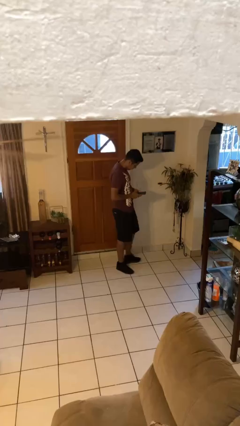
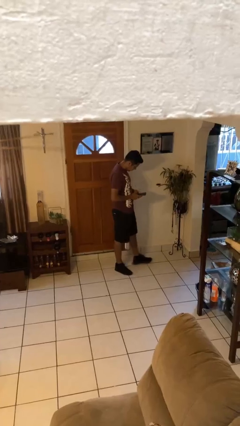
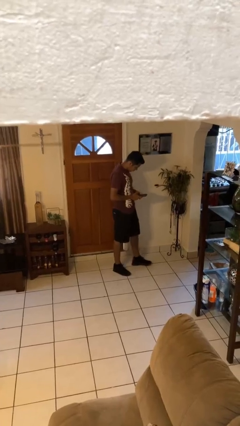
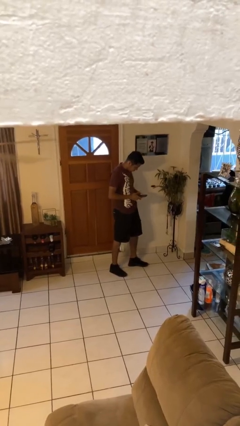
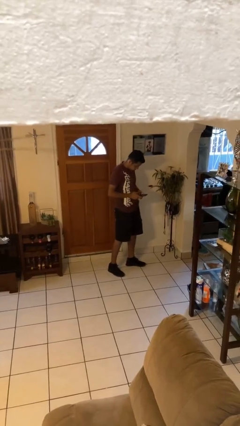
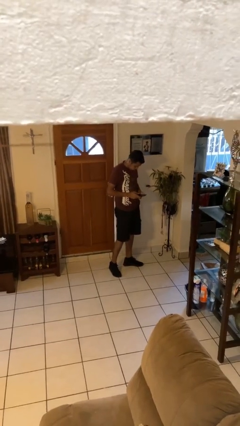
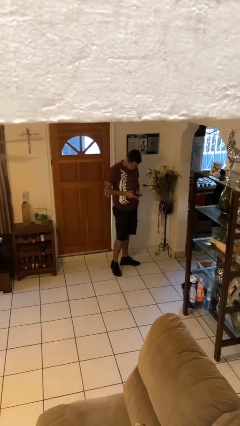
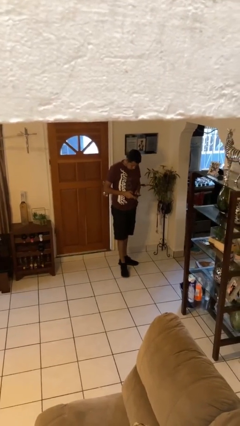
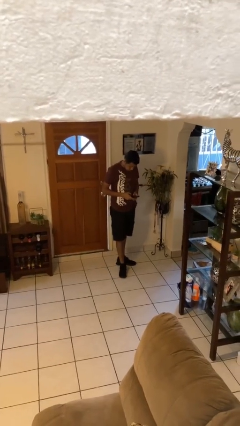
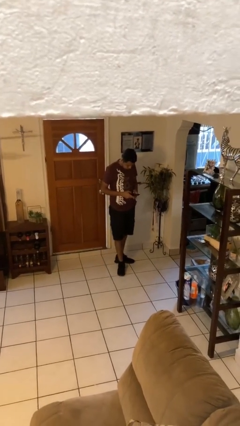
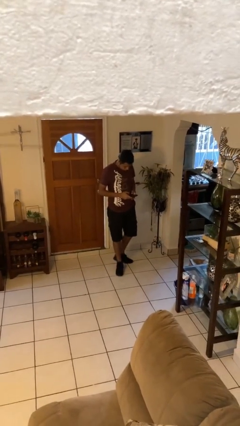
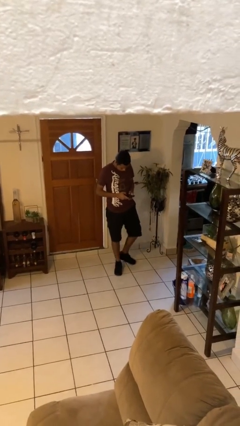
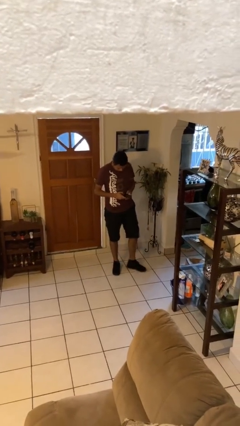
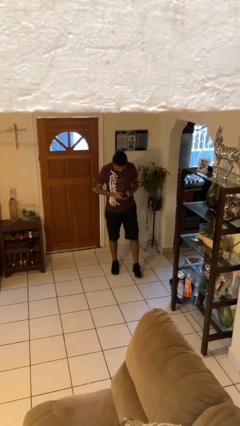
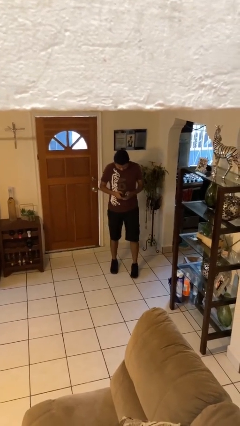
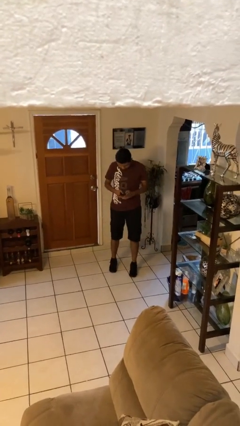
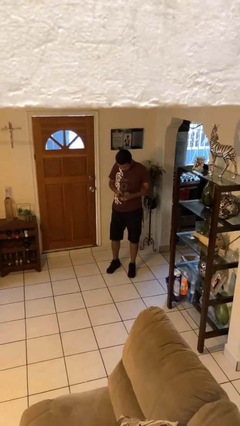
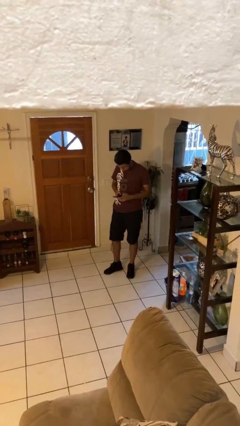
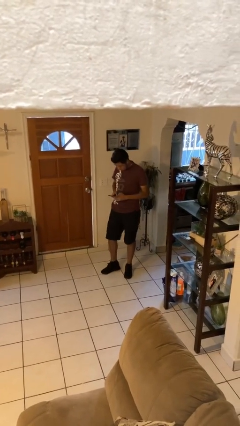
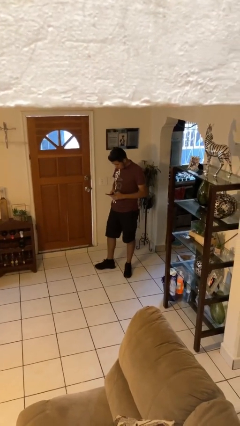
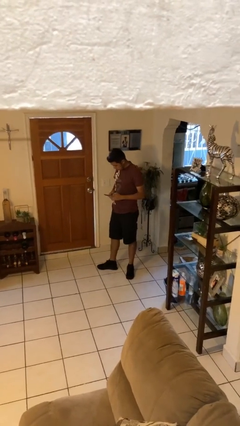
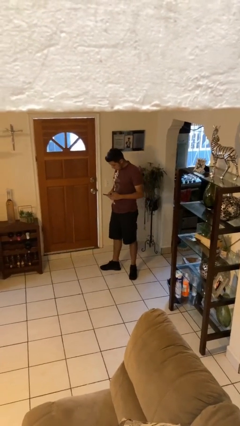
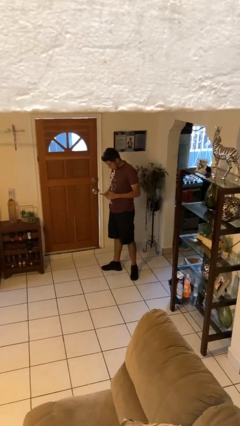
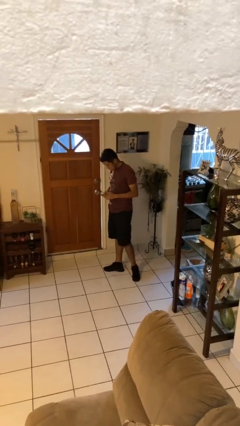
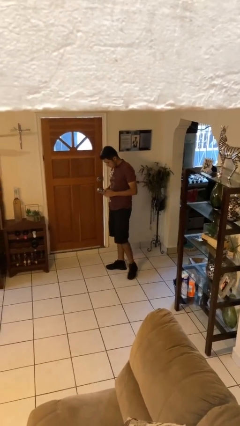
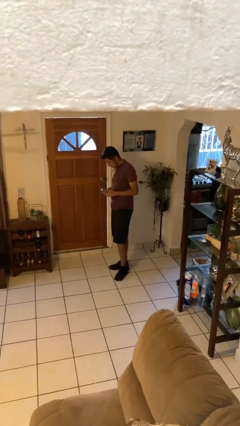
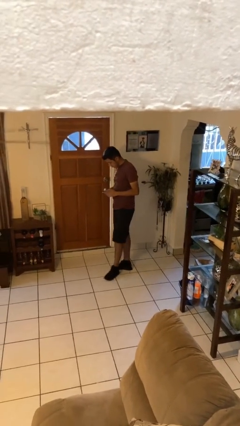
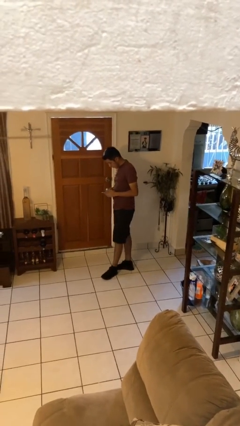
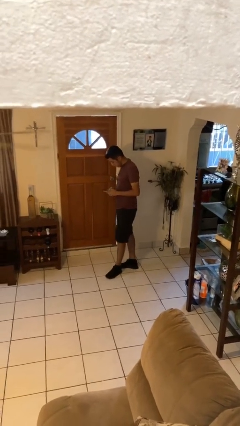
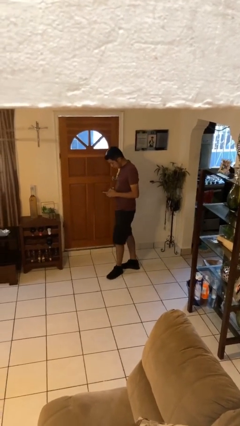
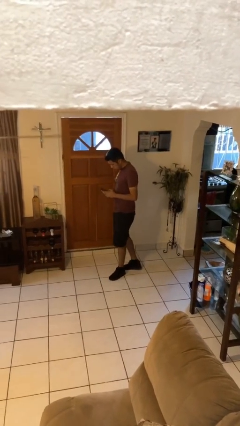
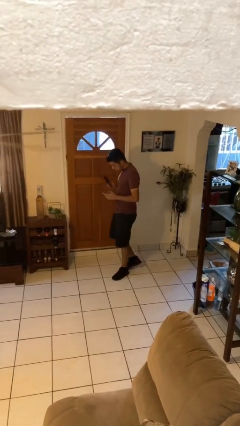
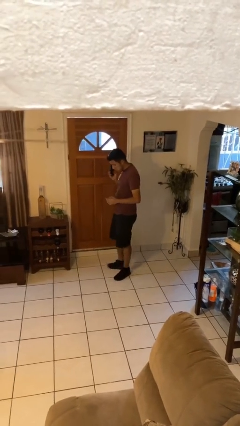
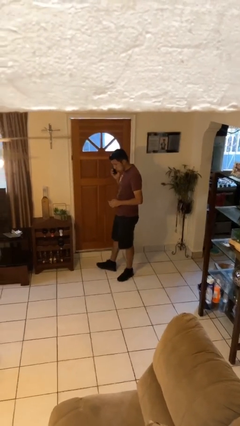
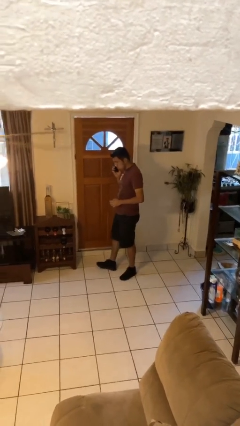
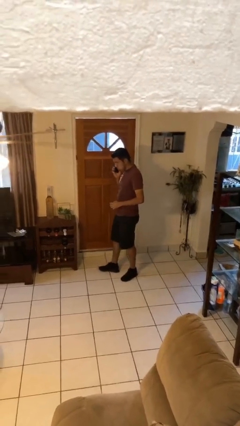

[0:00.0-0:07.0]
person texts on phone

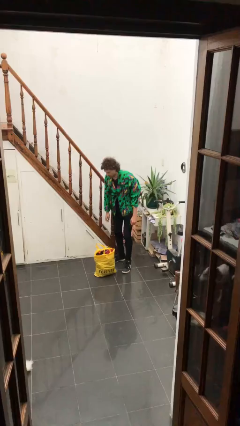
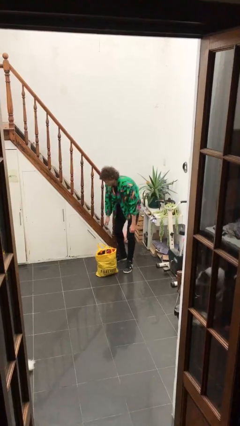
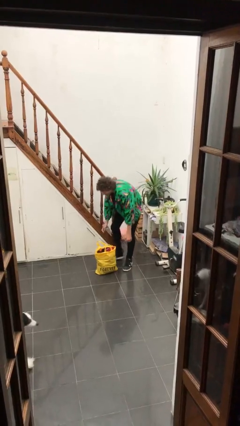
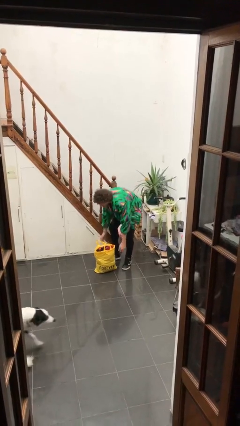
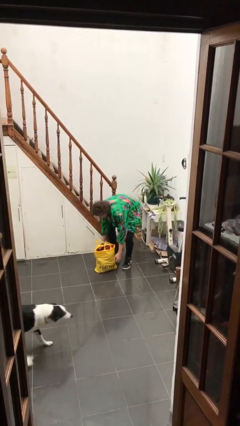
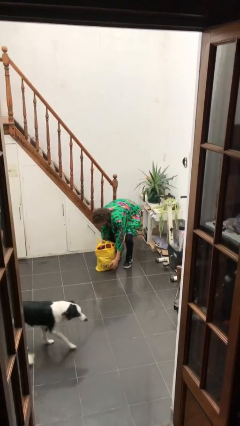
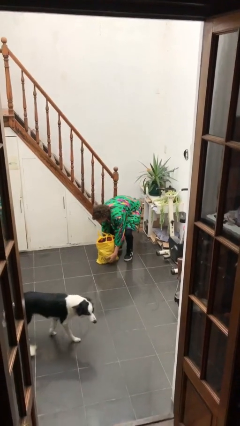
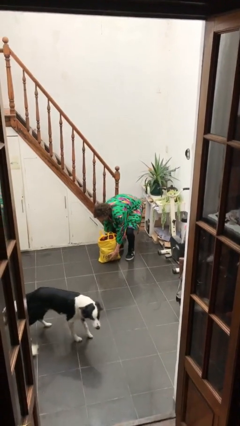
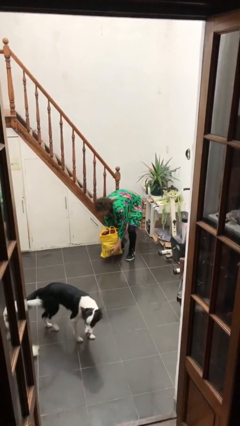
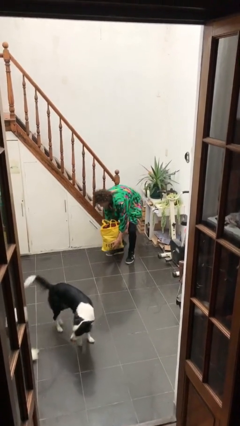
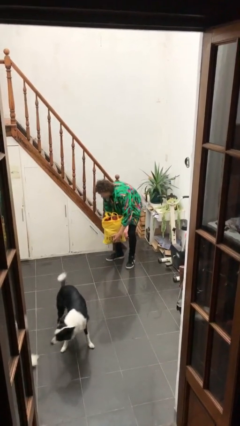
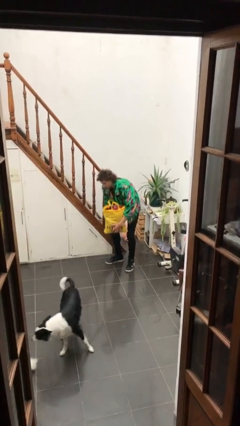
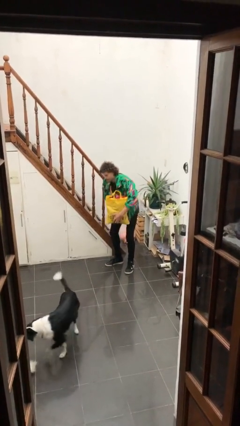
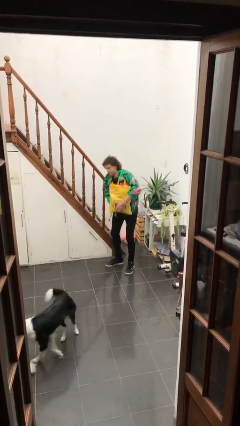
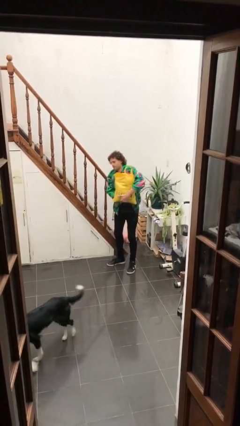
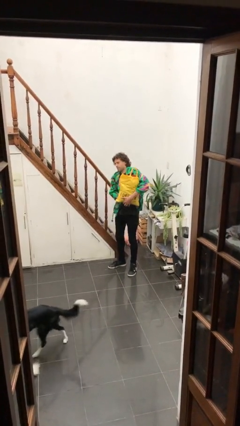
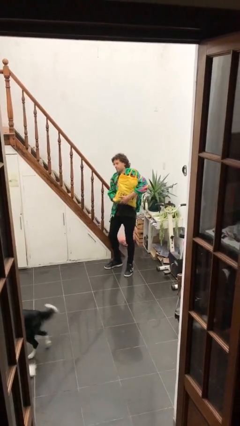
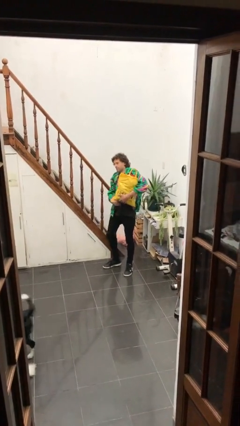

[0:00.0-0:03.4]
person picks up object from floor

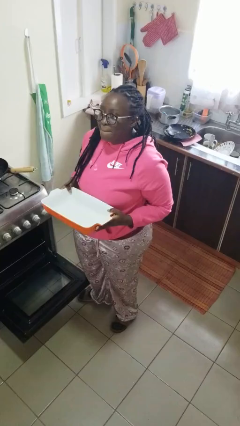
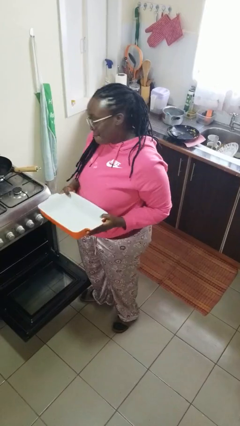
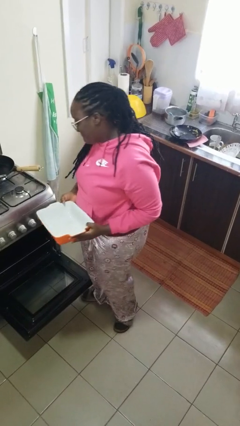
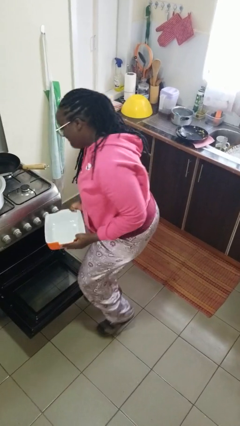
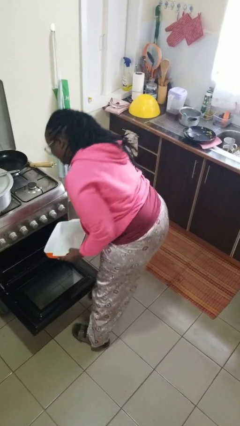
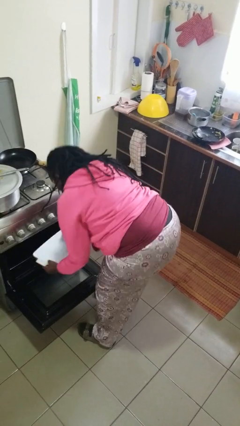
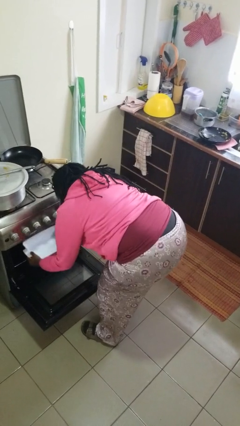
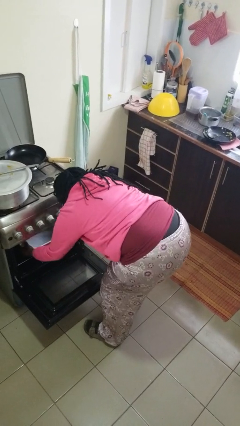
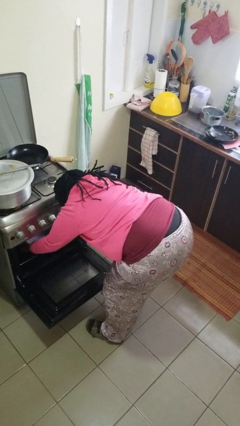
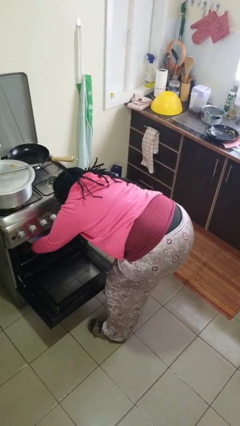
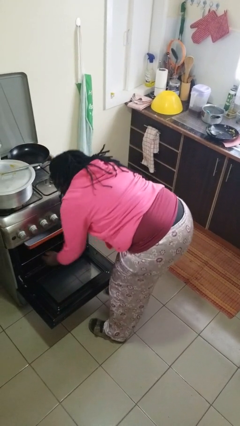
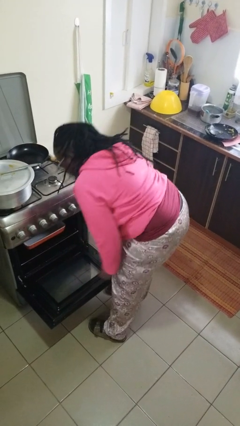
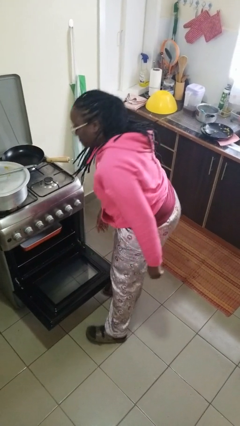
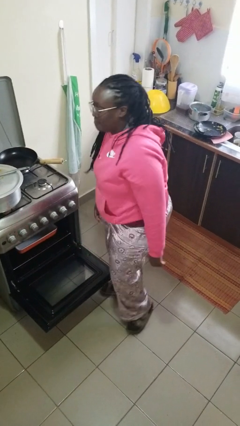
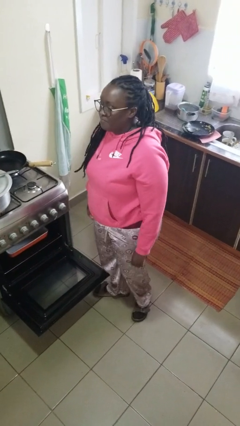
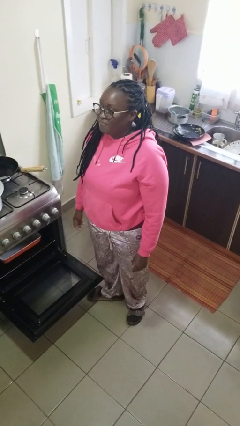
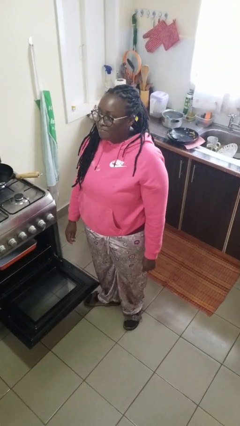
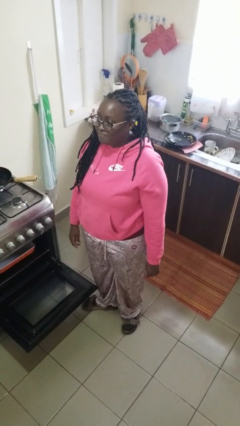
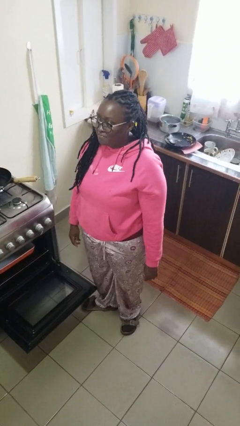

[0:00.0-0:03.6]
person puts object into oven

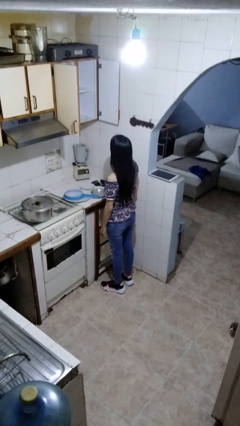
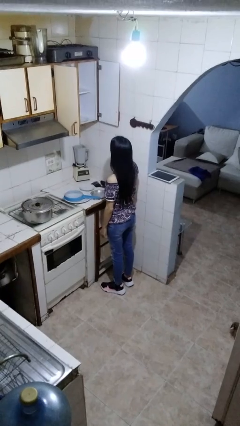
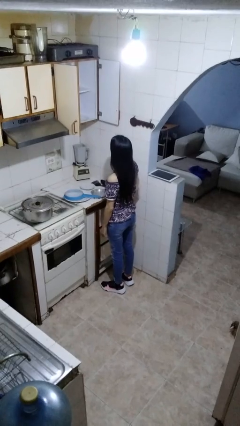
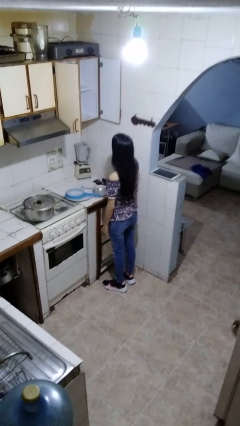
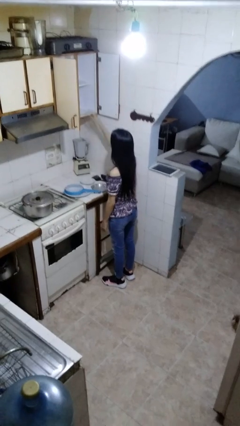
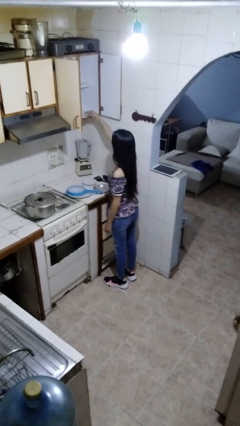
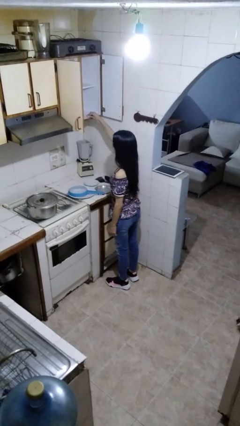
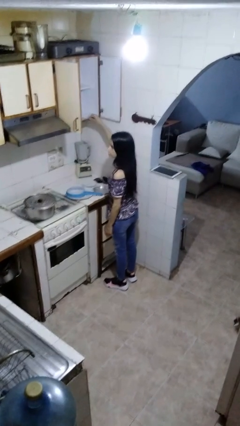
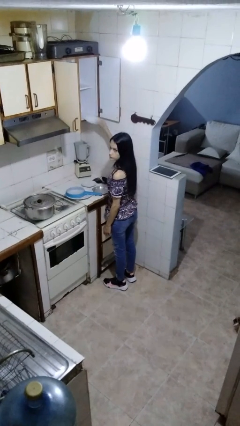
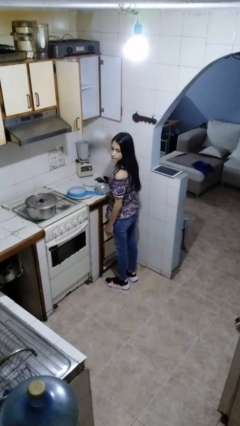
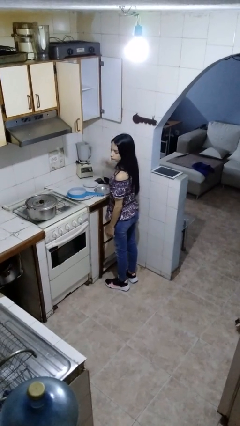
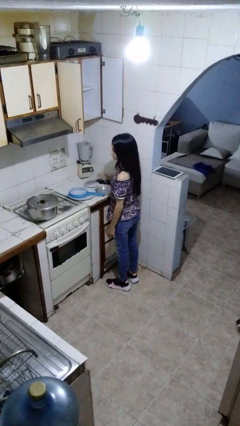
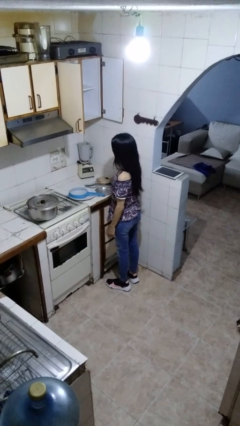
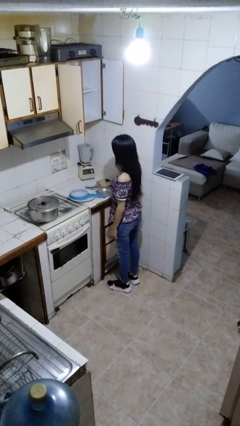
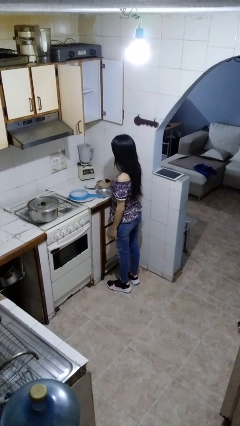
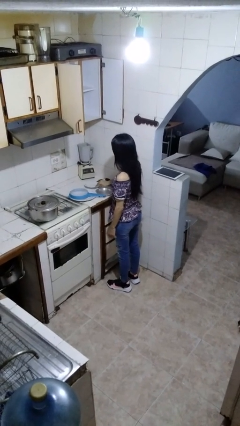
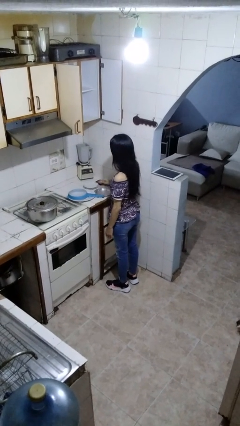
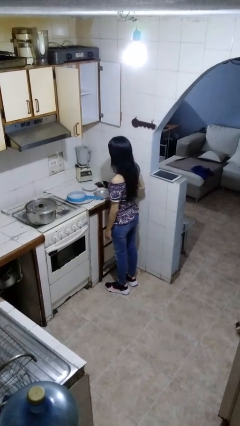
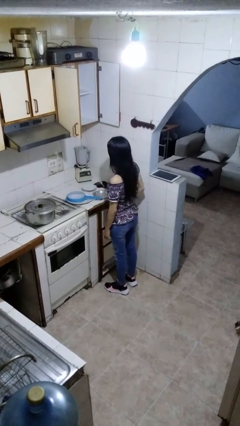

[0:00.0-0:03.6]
person takes object from cabinet

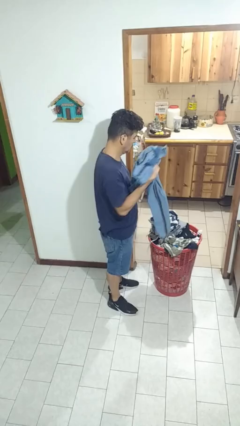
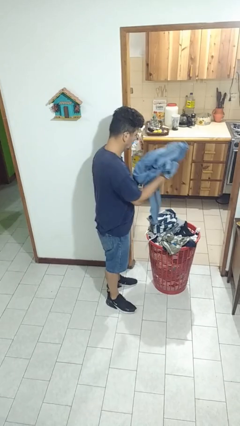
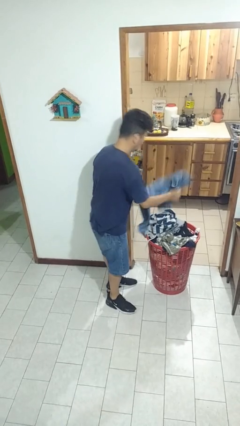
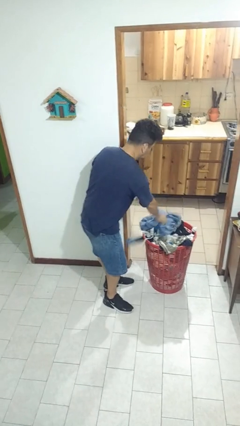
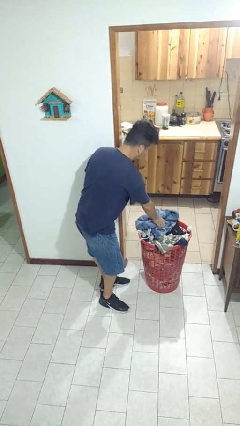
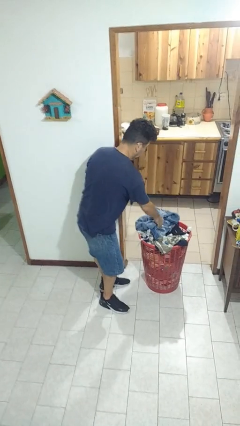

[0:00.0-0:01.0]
person puts object into basket
